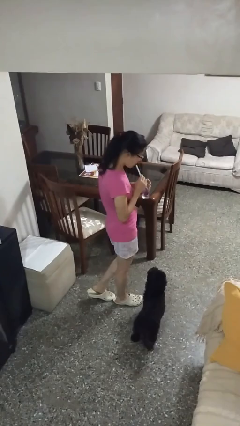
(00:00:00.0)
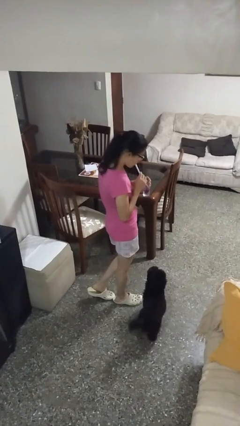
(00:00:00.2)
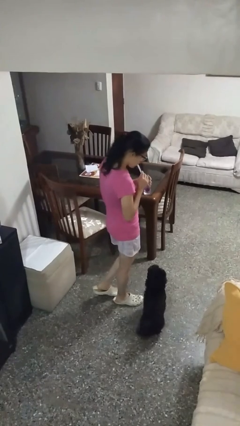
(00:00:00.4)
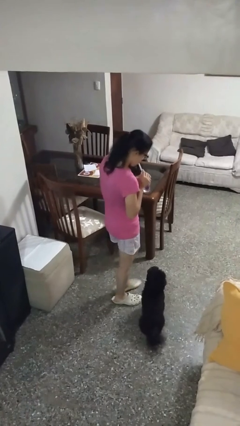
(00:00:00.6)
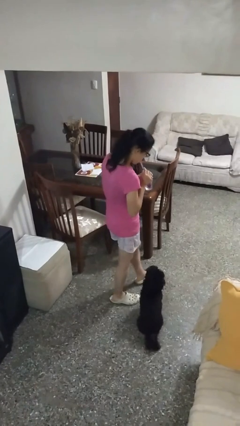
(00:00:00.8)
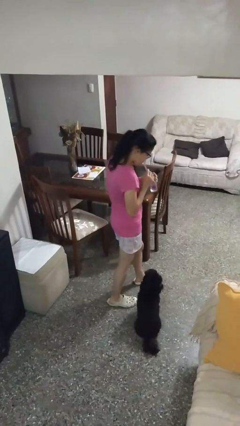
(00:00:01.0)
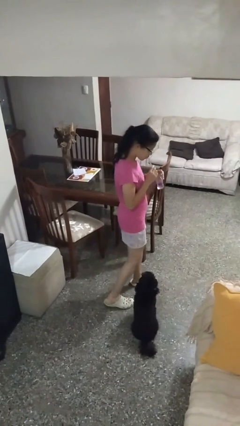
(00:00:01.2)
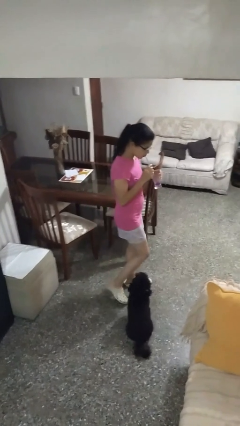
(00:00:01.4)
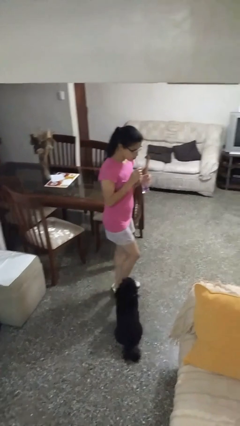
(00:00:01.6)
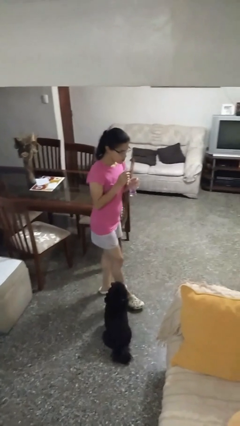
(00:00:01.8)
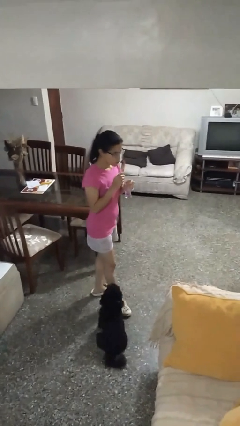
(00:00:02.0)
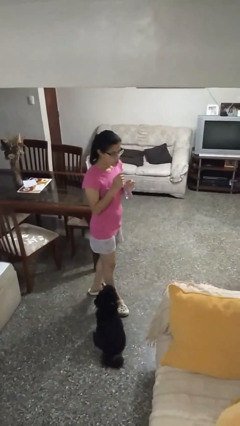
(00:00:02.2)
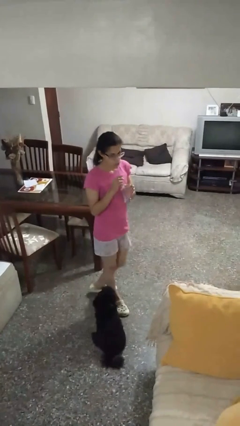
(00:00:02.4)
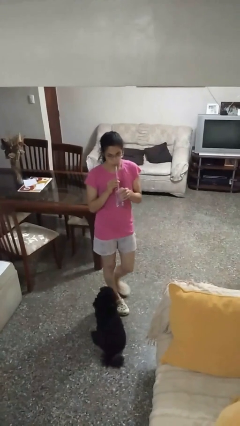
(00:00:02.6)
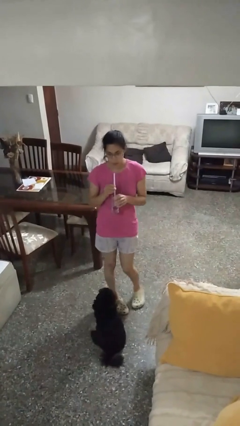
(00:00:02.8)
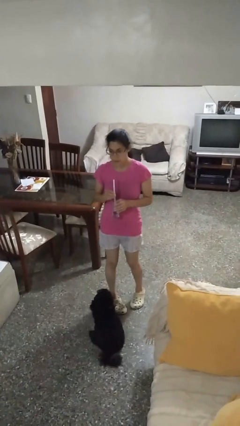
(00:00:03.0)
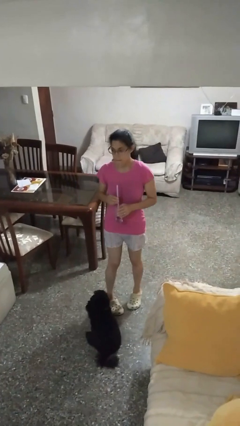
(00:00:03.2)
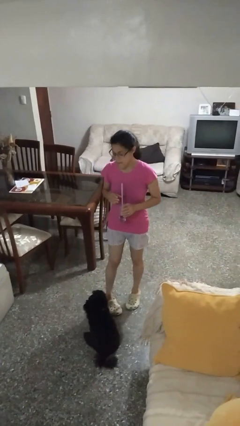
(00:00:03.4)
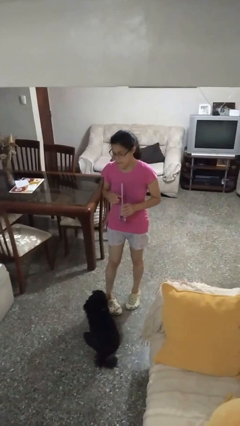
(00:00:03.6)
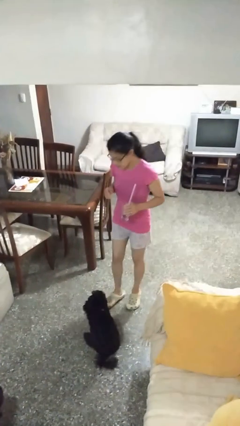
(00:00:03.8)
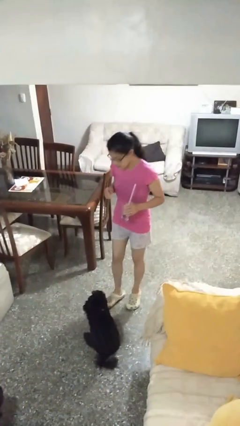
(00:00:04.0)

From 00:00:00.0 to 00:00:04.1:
person drinks from straw

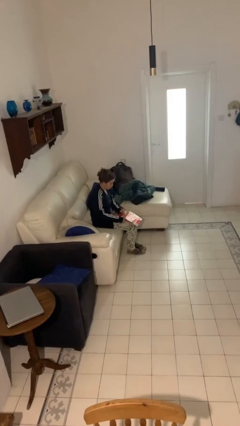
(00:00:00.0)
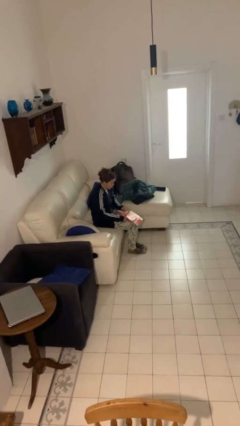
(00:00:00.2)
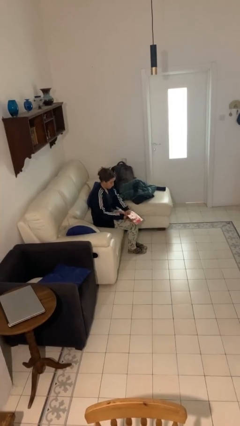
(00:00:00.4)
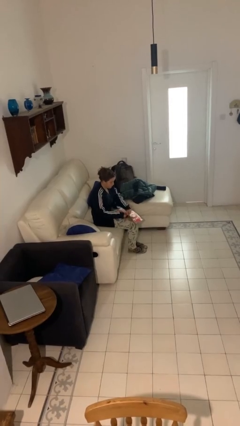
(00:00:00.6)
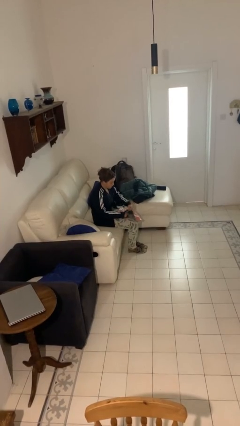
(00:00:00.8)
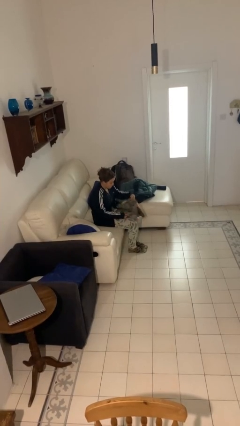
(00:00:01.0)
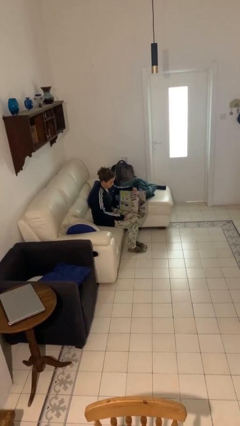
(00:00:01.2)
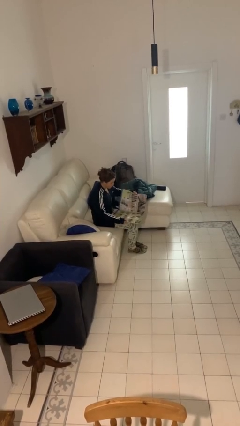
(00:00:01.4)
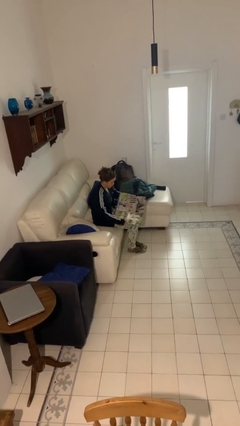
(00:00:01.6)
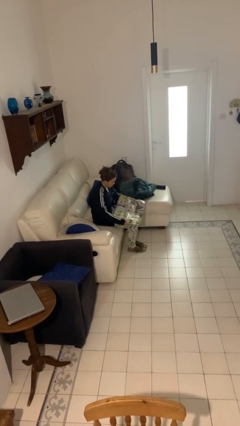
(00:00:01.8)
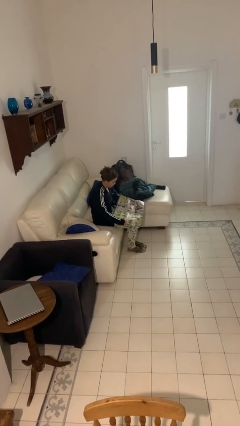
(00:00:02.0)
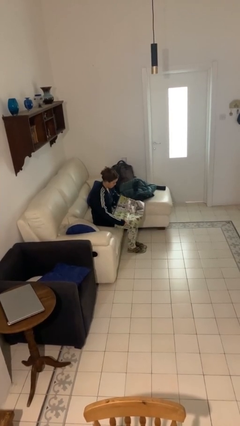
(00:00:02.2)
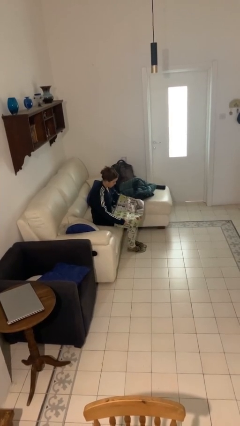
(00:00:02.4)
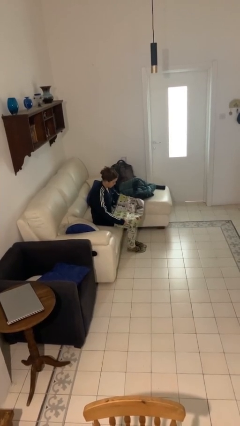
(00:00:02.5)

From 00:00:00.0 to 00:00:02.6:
person reads newspaper

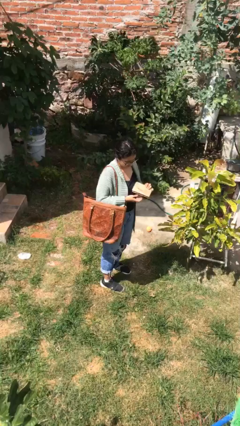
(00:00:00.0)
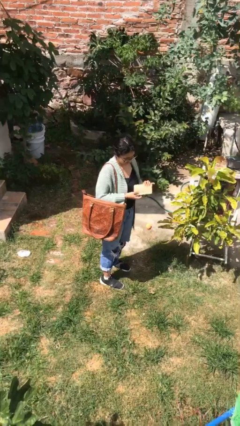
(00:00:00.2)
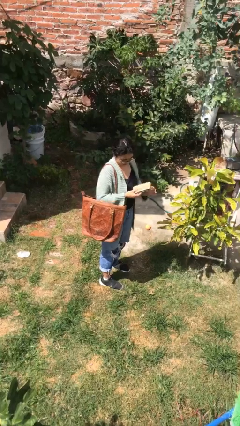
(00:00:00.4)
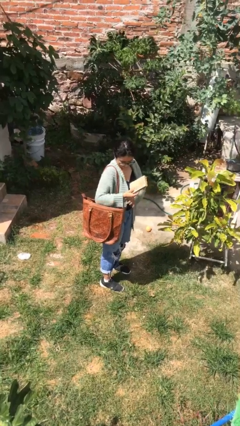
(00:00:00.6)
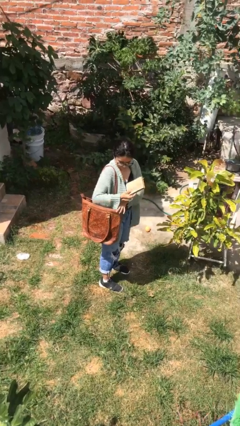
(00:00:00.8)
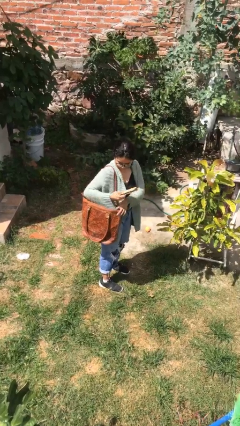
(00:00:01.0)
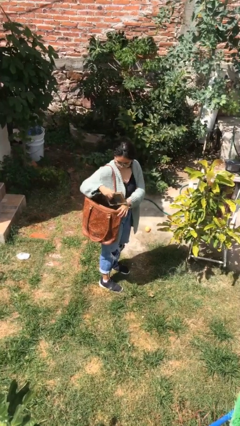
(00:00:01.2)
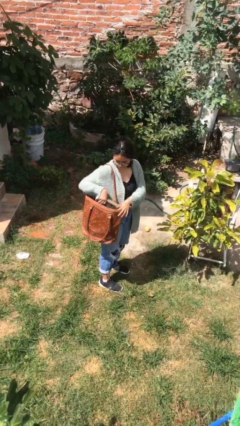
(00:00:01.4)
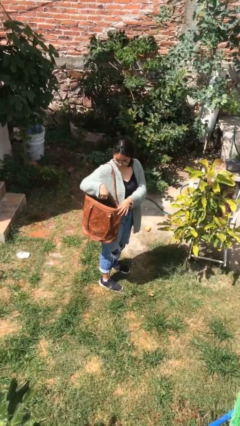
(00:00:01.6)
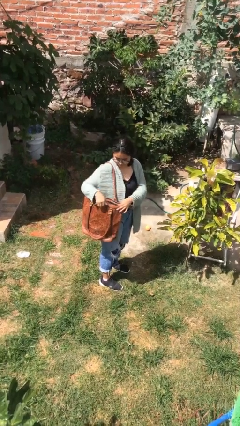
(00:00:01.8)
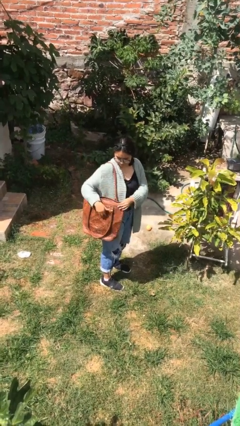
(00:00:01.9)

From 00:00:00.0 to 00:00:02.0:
person puts object into purse

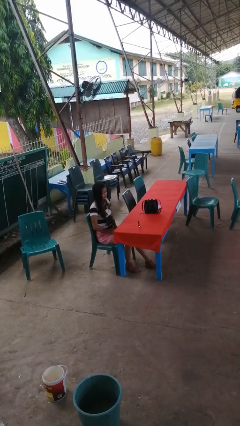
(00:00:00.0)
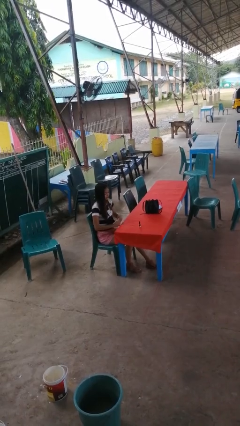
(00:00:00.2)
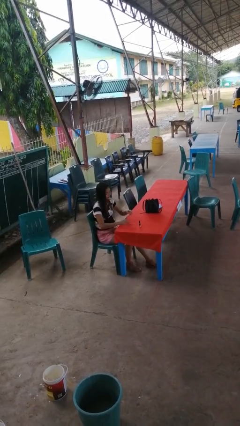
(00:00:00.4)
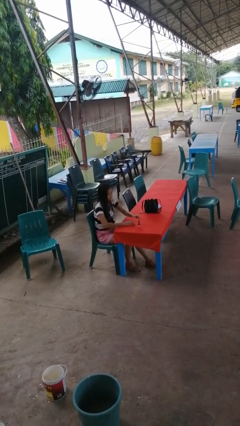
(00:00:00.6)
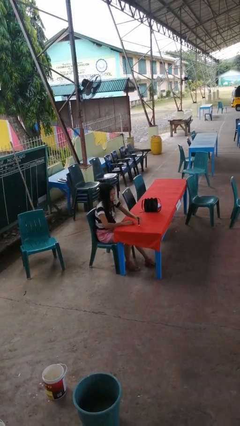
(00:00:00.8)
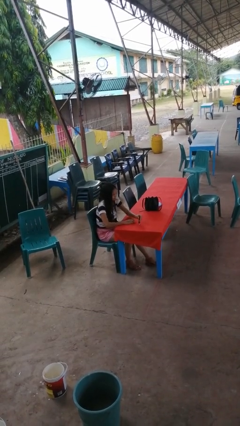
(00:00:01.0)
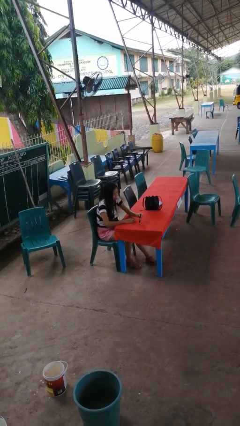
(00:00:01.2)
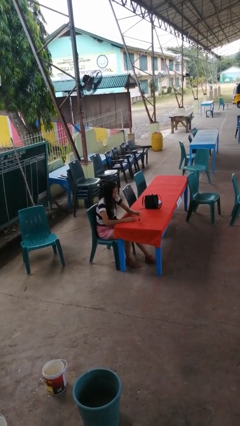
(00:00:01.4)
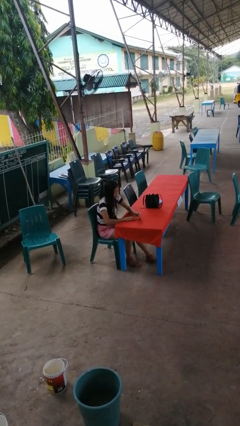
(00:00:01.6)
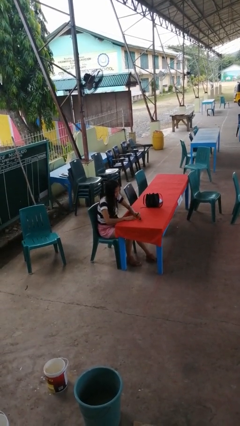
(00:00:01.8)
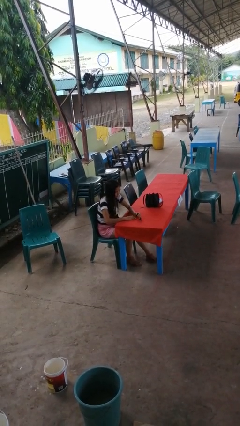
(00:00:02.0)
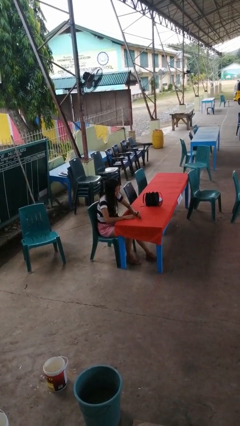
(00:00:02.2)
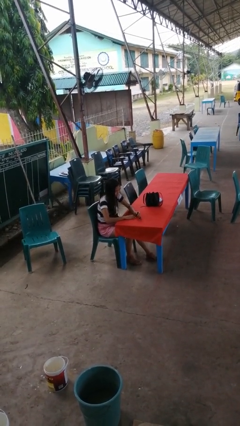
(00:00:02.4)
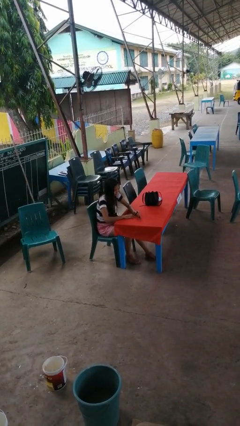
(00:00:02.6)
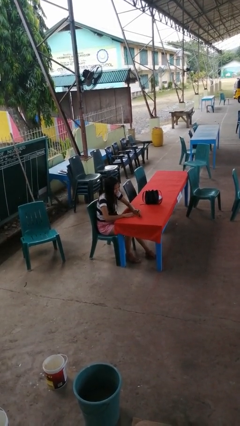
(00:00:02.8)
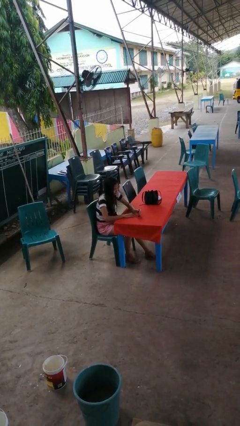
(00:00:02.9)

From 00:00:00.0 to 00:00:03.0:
person paints fingernails

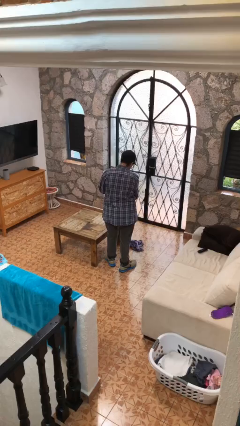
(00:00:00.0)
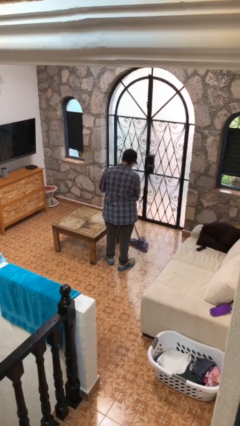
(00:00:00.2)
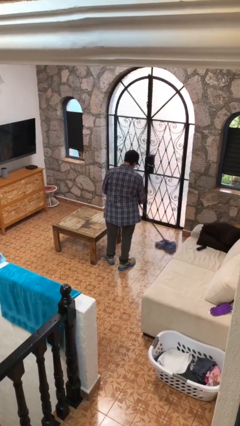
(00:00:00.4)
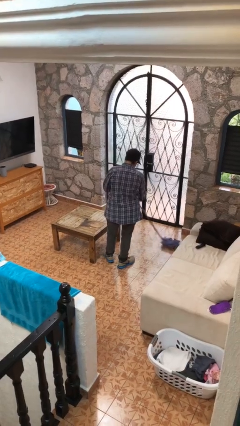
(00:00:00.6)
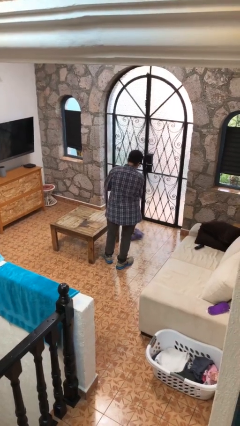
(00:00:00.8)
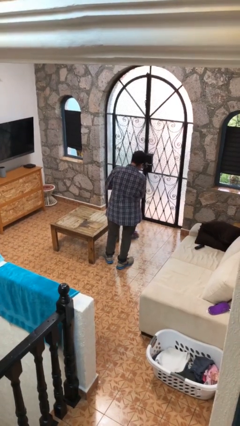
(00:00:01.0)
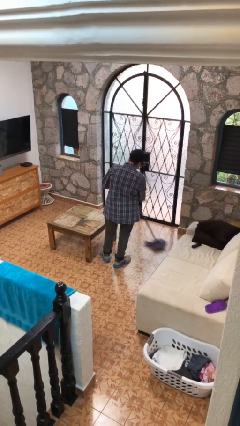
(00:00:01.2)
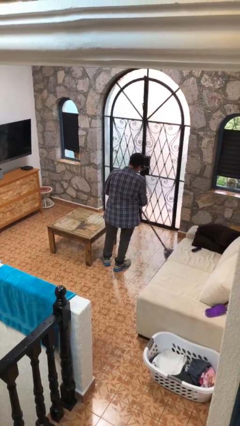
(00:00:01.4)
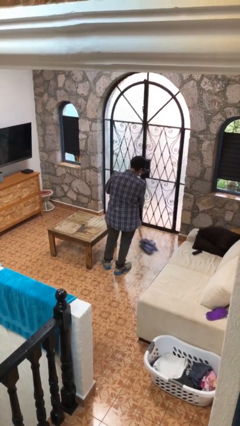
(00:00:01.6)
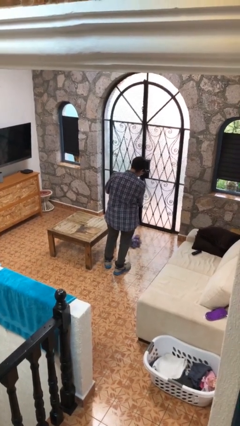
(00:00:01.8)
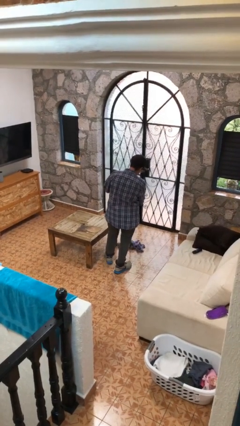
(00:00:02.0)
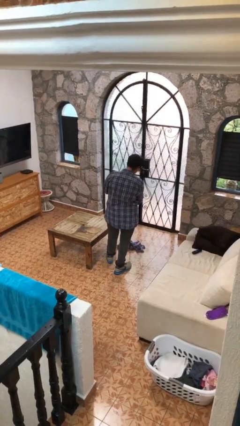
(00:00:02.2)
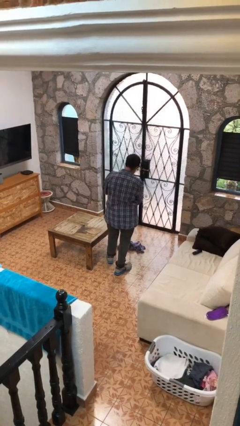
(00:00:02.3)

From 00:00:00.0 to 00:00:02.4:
person mops

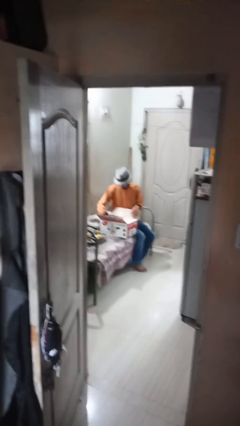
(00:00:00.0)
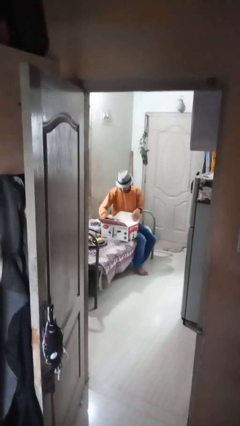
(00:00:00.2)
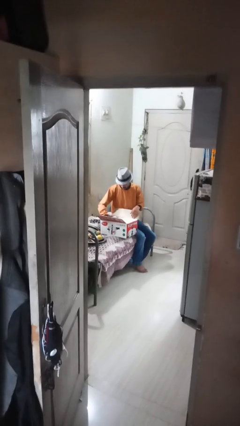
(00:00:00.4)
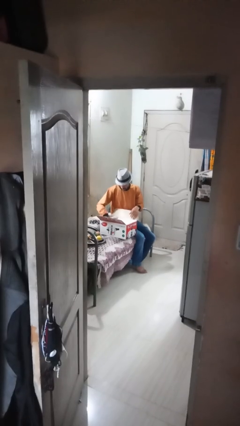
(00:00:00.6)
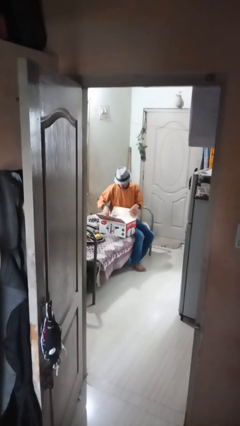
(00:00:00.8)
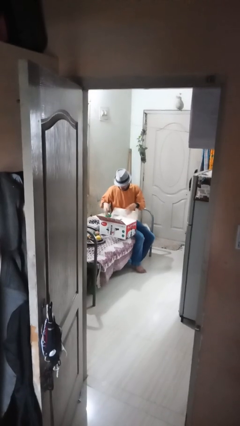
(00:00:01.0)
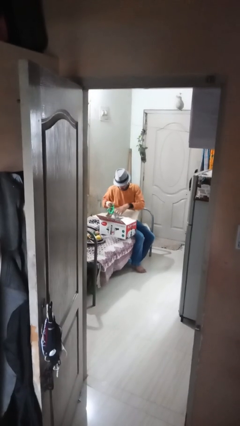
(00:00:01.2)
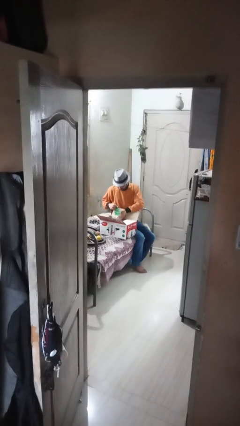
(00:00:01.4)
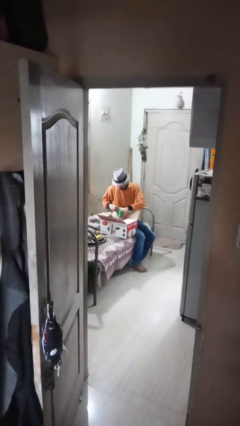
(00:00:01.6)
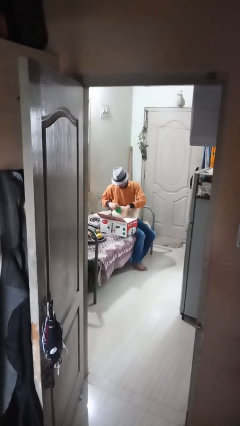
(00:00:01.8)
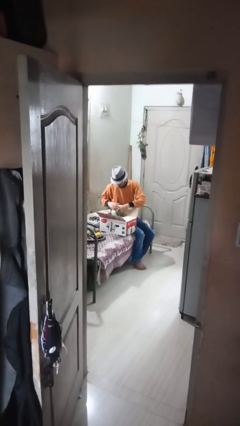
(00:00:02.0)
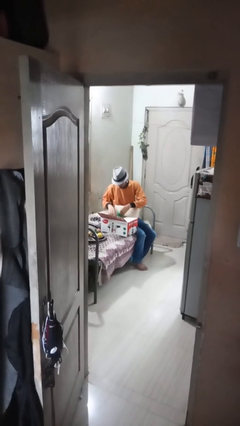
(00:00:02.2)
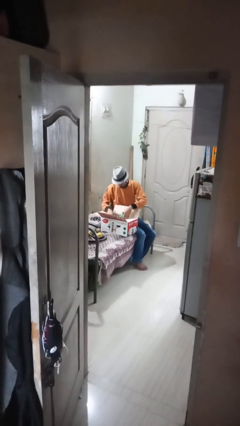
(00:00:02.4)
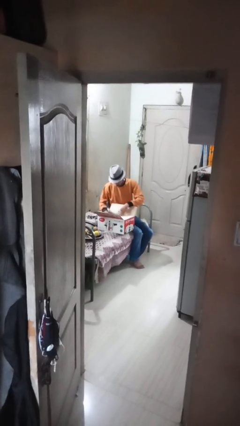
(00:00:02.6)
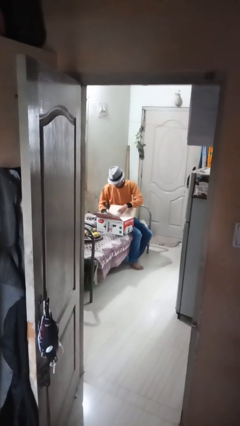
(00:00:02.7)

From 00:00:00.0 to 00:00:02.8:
person searches in box

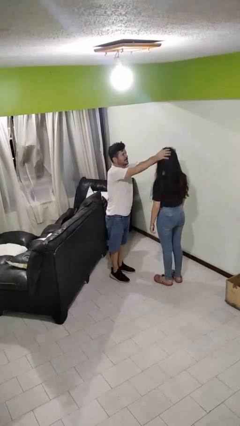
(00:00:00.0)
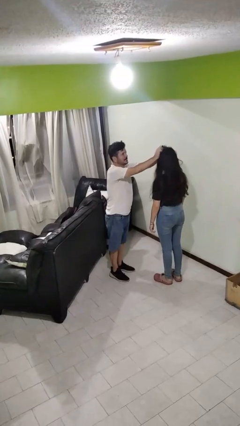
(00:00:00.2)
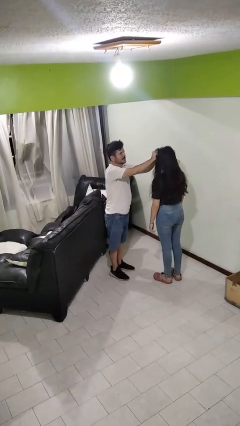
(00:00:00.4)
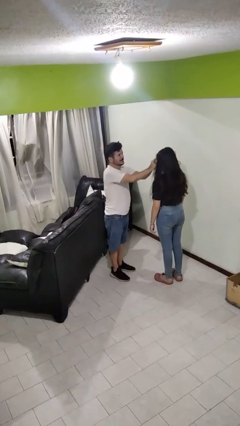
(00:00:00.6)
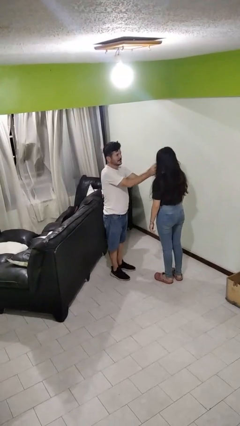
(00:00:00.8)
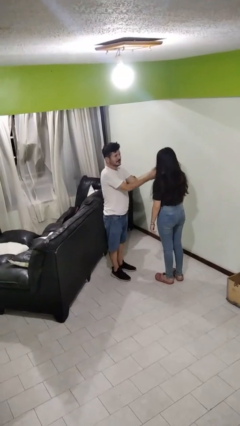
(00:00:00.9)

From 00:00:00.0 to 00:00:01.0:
person grabs person by hair
